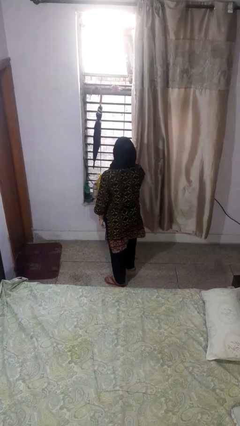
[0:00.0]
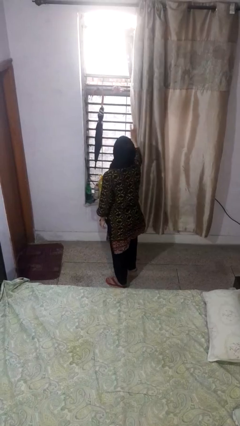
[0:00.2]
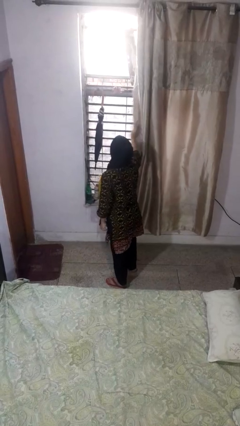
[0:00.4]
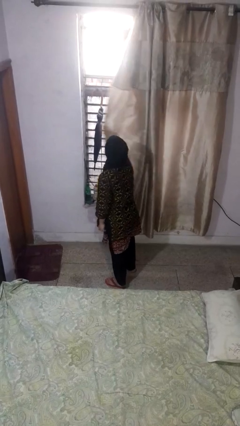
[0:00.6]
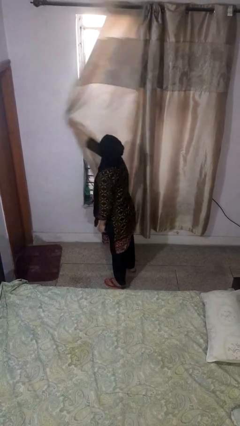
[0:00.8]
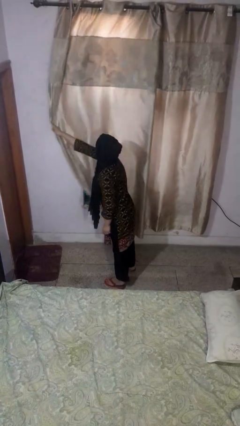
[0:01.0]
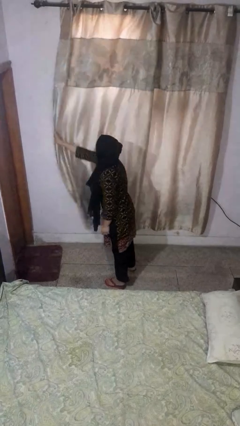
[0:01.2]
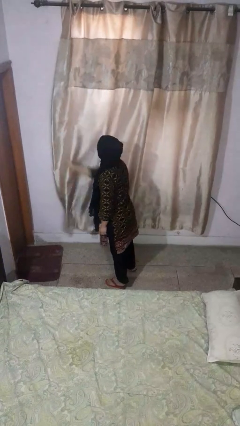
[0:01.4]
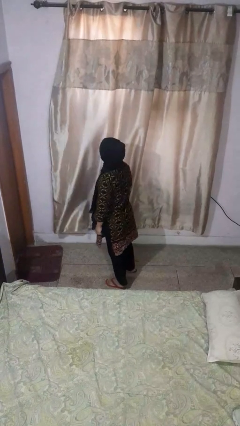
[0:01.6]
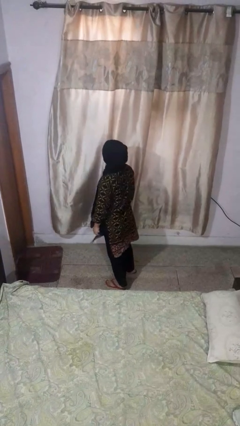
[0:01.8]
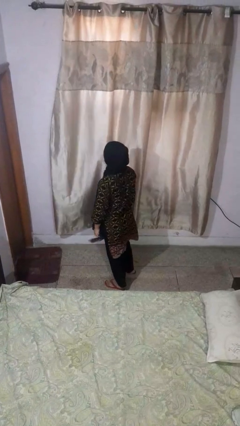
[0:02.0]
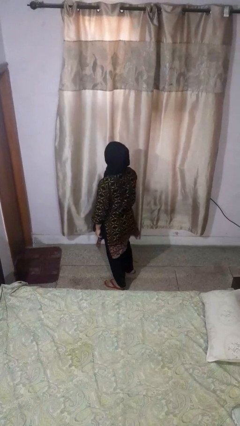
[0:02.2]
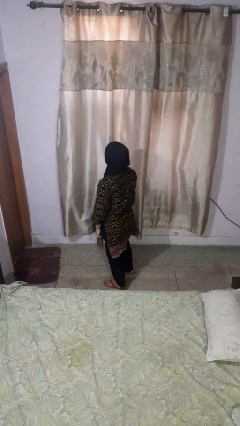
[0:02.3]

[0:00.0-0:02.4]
person closes curtains

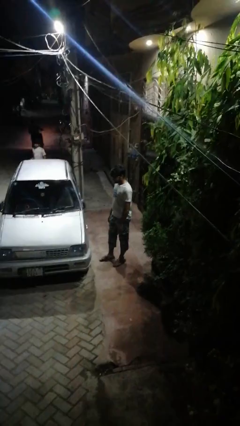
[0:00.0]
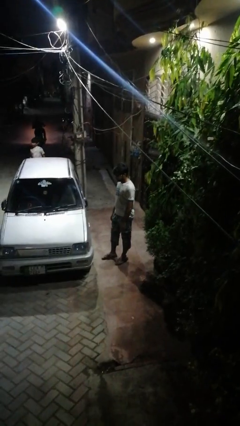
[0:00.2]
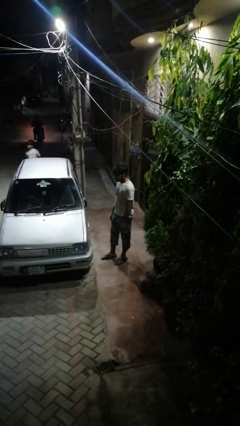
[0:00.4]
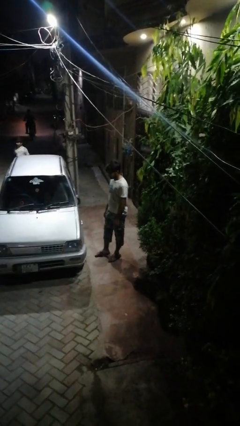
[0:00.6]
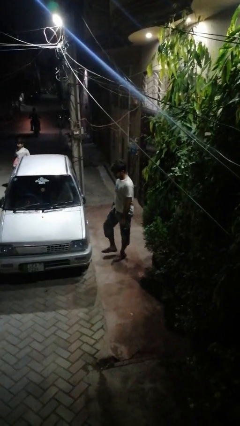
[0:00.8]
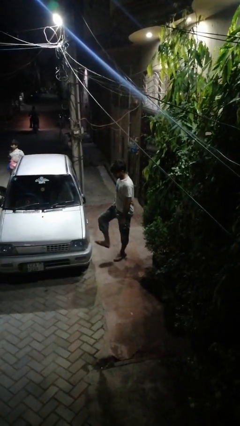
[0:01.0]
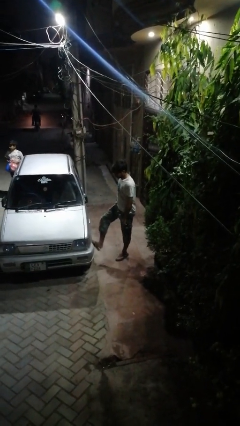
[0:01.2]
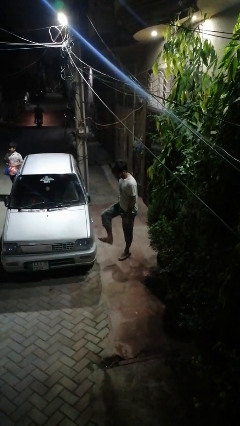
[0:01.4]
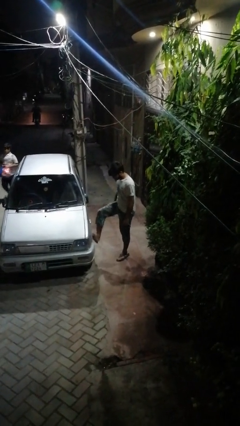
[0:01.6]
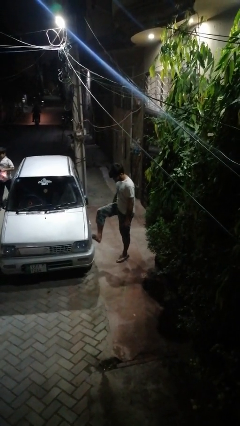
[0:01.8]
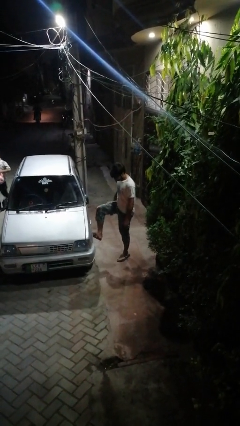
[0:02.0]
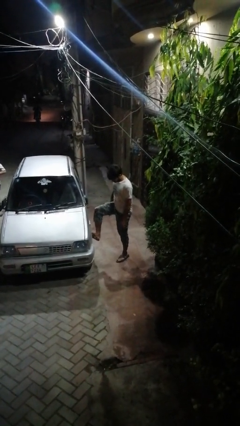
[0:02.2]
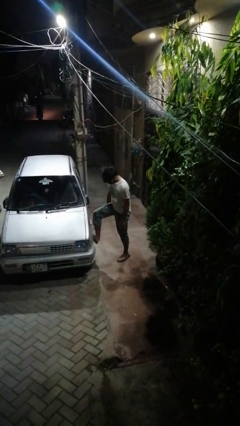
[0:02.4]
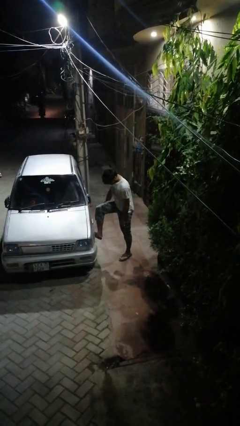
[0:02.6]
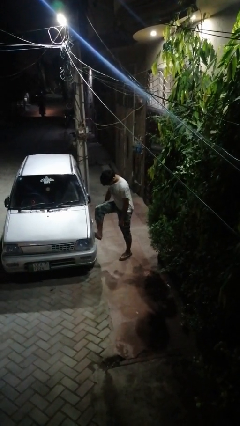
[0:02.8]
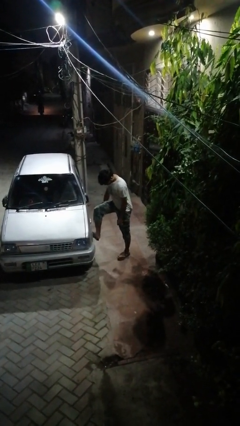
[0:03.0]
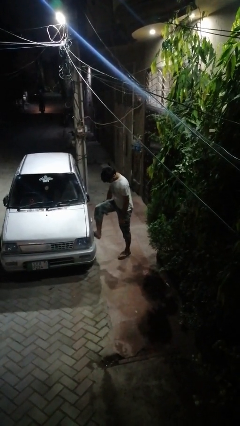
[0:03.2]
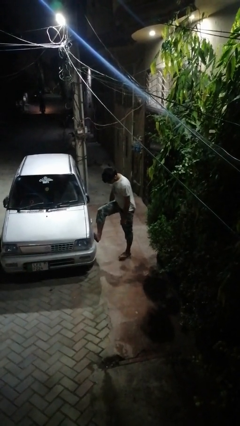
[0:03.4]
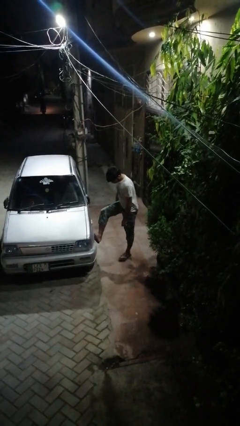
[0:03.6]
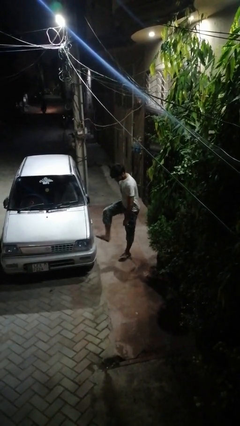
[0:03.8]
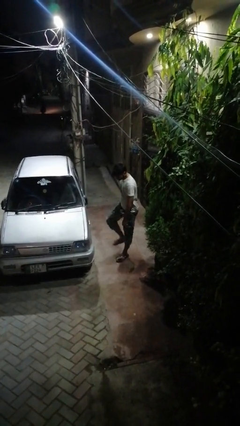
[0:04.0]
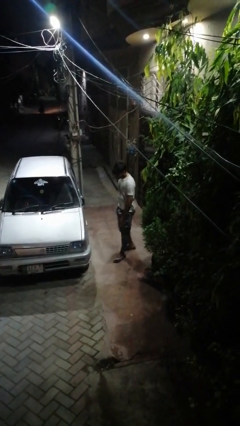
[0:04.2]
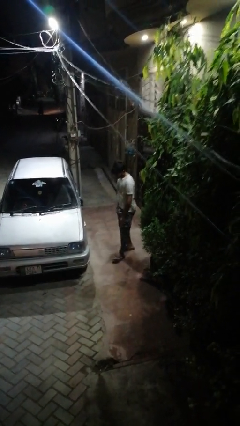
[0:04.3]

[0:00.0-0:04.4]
person kicks car tires

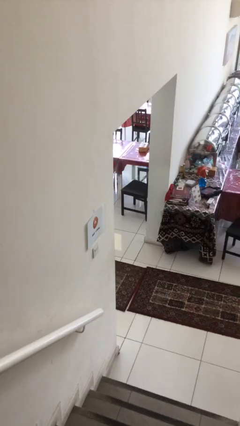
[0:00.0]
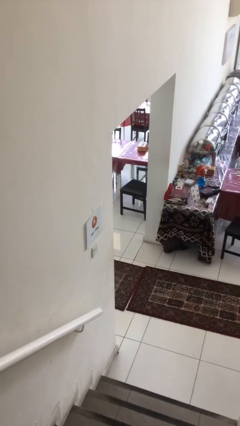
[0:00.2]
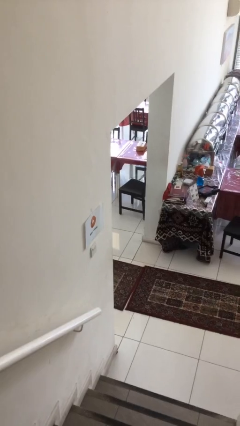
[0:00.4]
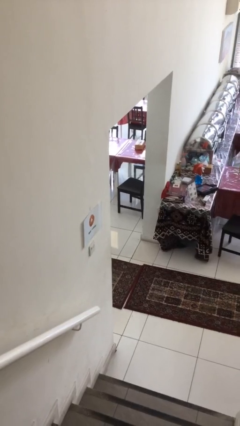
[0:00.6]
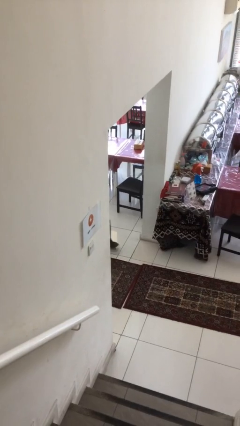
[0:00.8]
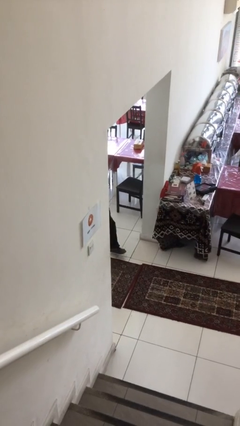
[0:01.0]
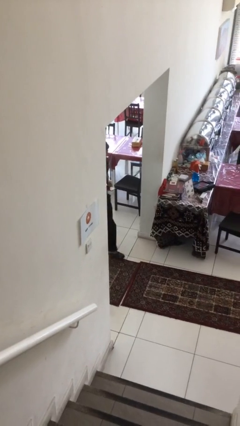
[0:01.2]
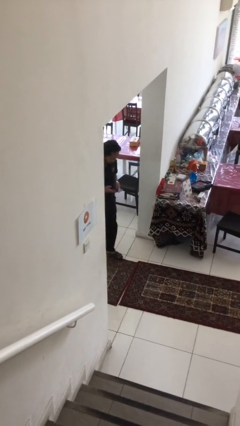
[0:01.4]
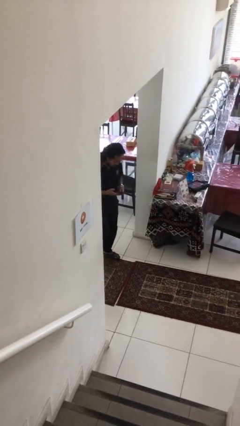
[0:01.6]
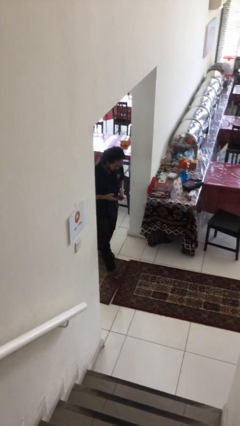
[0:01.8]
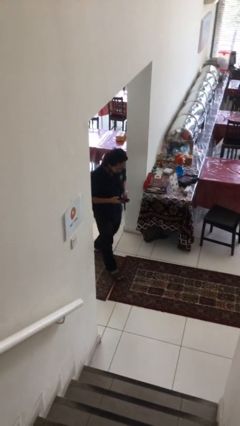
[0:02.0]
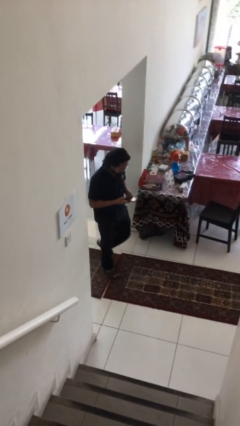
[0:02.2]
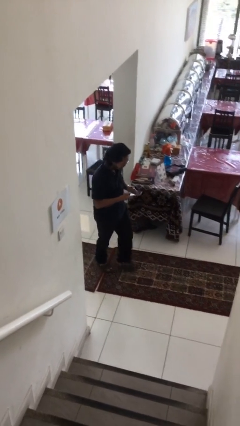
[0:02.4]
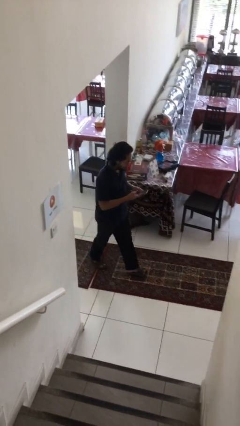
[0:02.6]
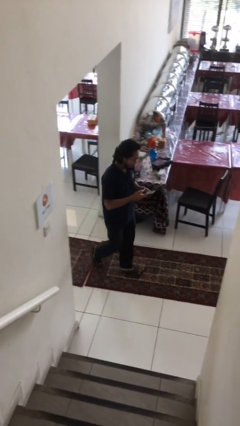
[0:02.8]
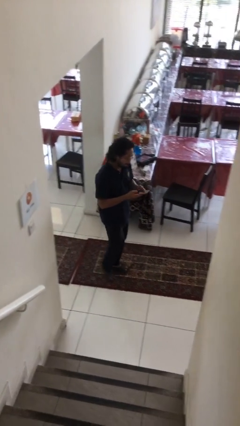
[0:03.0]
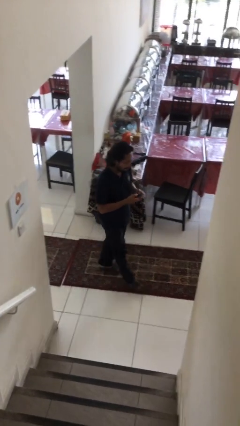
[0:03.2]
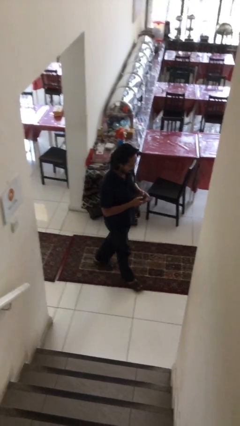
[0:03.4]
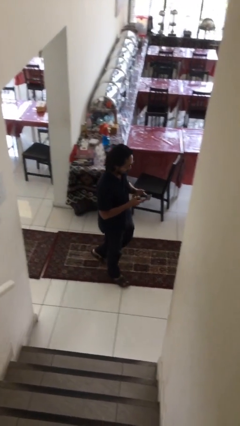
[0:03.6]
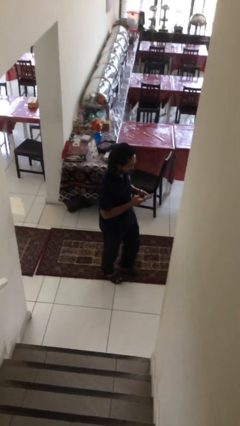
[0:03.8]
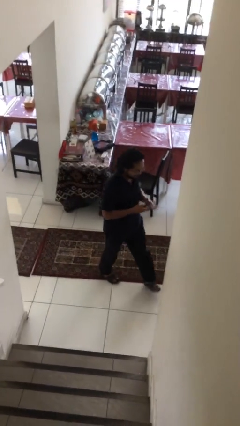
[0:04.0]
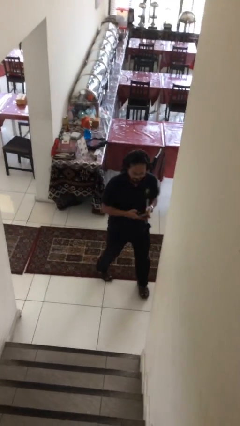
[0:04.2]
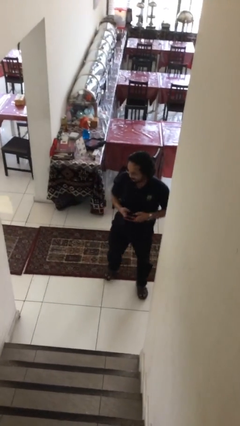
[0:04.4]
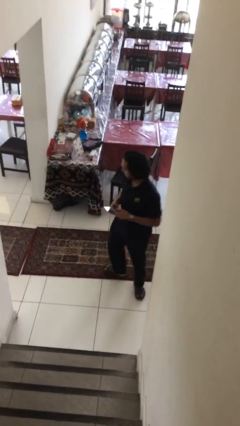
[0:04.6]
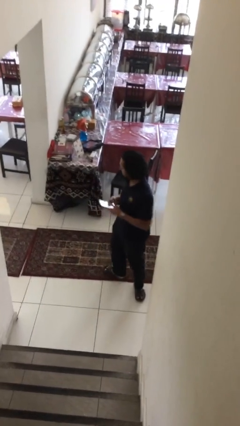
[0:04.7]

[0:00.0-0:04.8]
person enters scene through structure

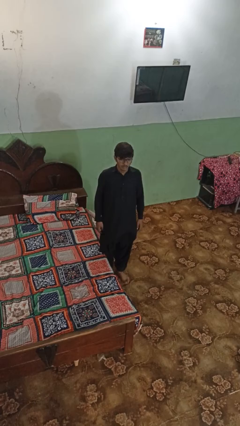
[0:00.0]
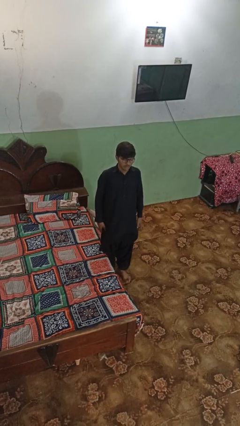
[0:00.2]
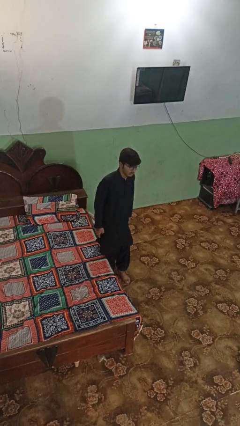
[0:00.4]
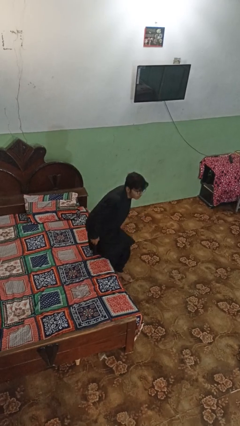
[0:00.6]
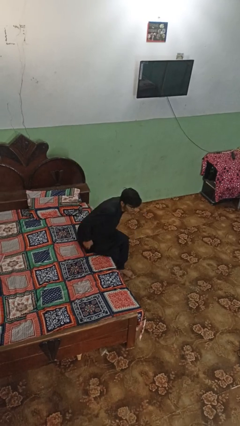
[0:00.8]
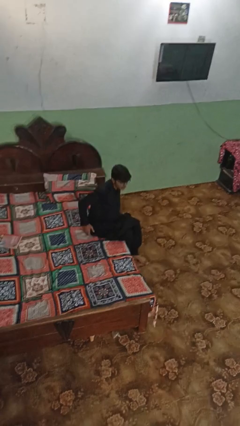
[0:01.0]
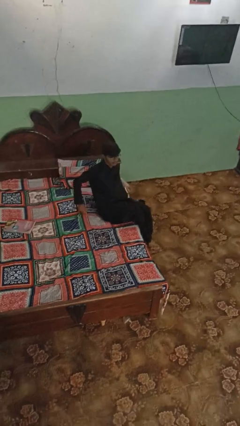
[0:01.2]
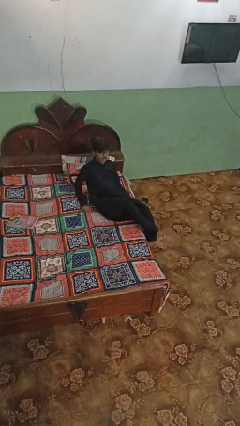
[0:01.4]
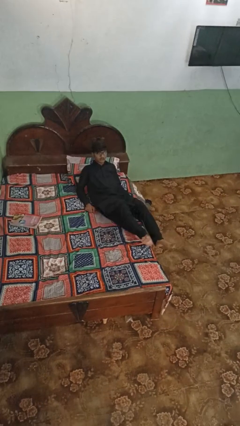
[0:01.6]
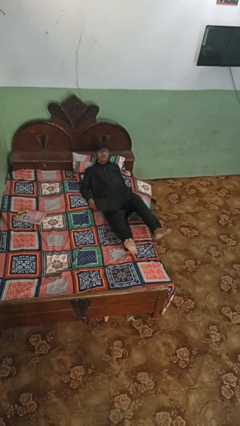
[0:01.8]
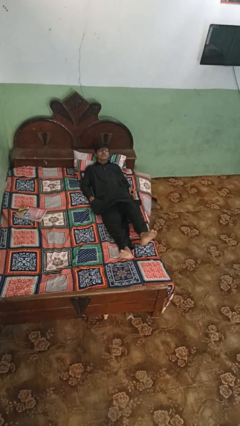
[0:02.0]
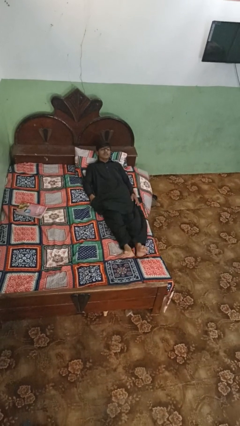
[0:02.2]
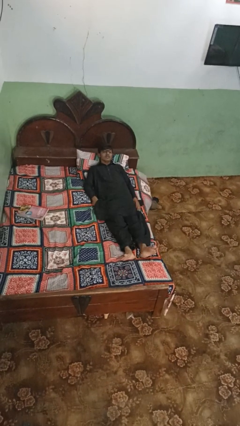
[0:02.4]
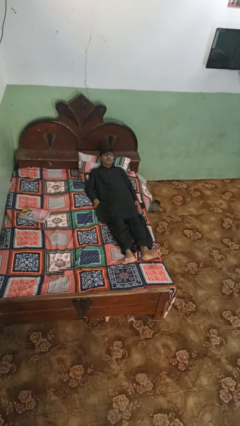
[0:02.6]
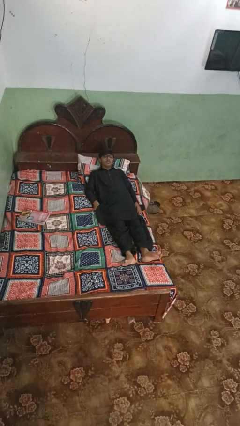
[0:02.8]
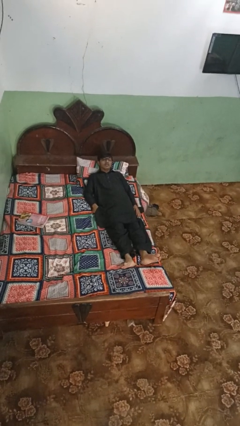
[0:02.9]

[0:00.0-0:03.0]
person lies down on bed

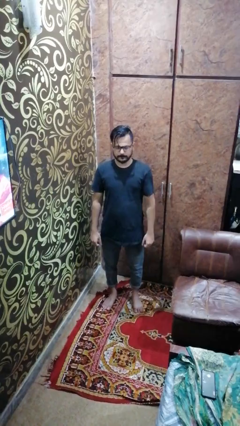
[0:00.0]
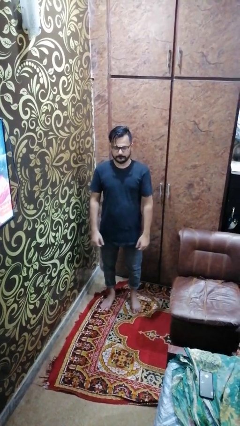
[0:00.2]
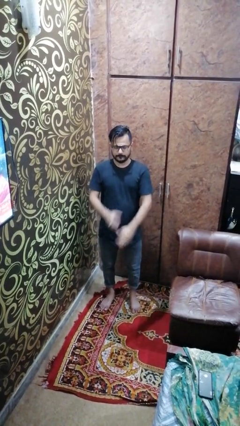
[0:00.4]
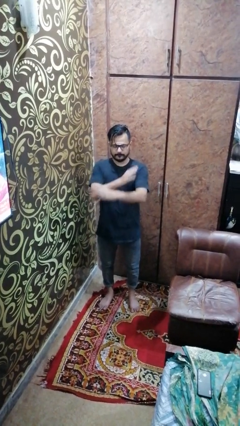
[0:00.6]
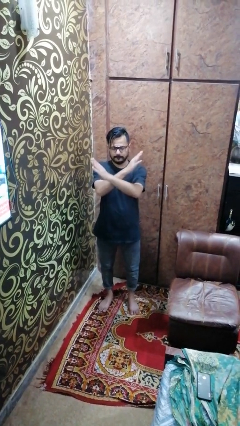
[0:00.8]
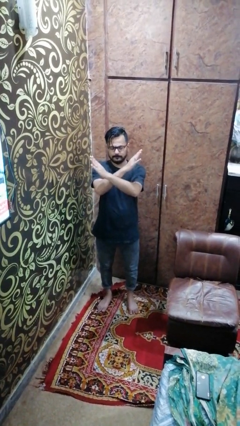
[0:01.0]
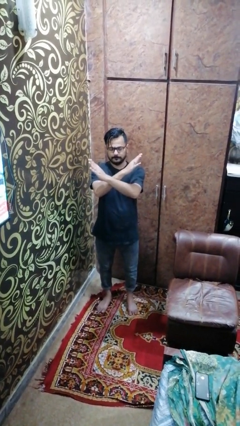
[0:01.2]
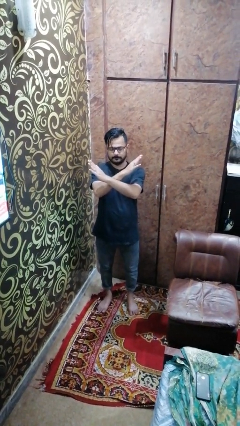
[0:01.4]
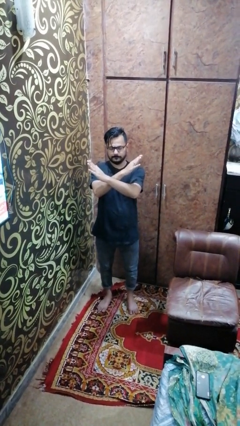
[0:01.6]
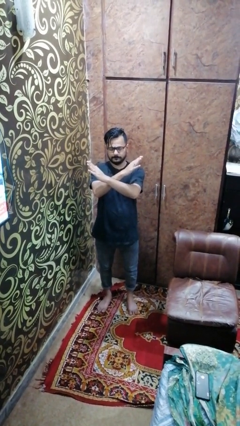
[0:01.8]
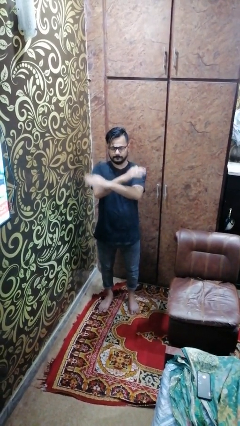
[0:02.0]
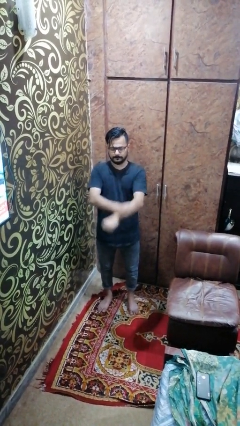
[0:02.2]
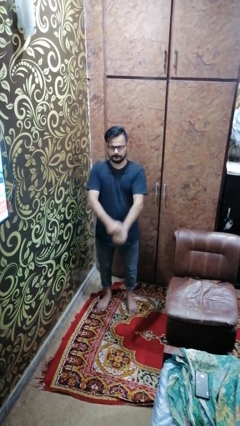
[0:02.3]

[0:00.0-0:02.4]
person crosses arms

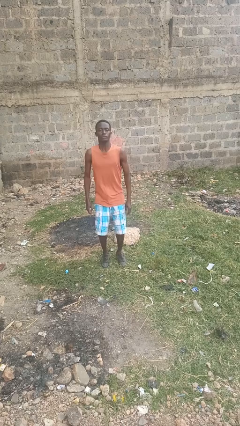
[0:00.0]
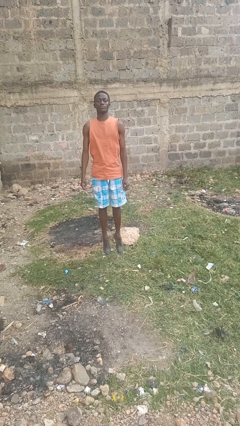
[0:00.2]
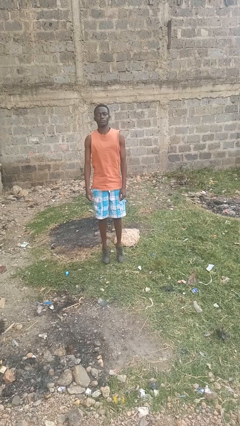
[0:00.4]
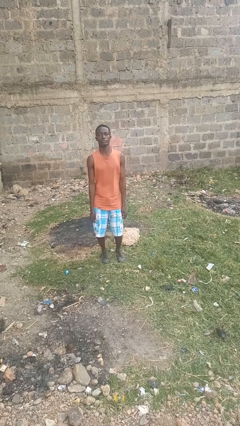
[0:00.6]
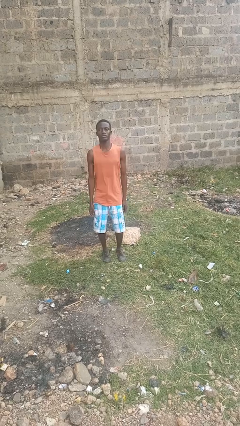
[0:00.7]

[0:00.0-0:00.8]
person jumps
